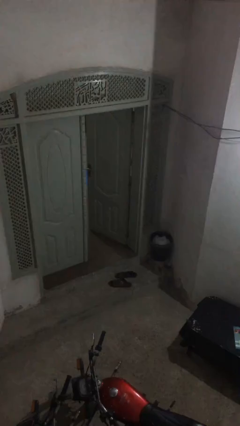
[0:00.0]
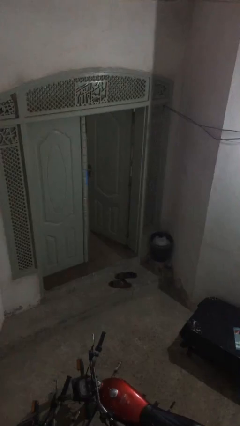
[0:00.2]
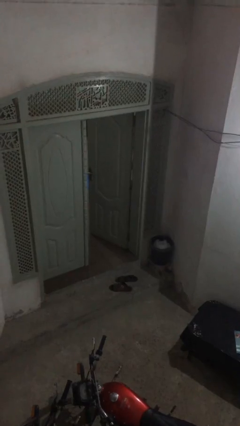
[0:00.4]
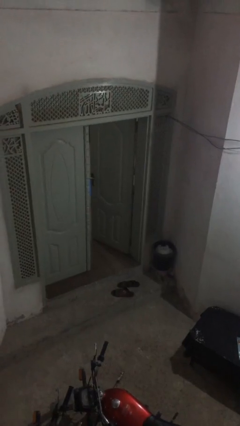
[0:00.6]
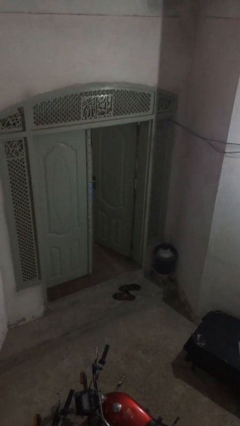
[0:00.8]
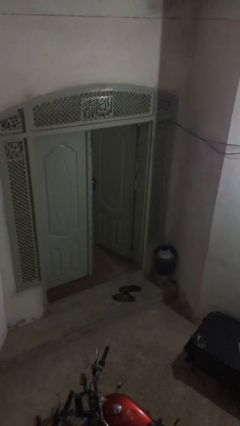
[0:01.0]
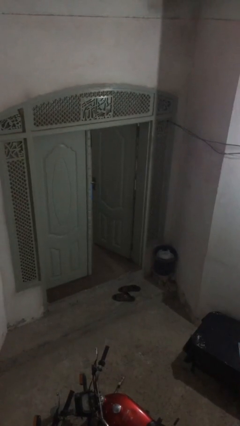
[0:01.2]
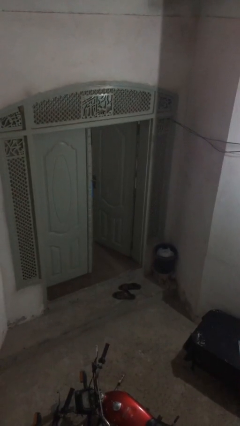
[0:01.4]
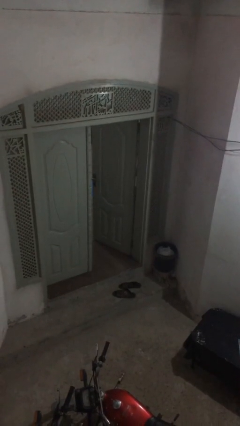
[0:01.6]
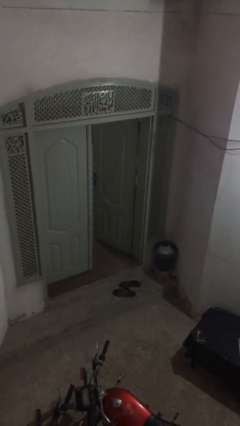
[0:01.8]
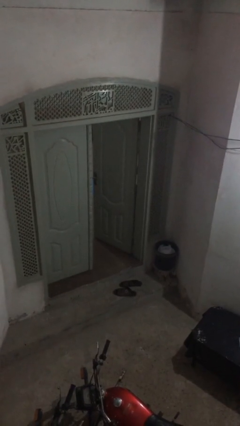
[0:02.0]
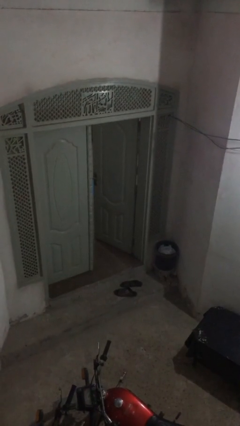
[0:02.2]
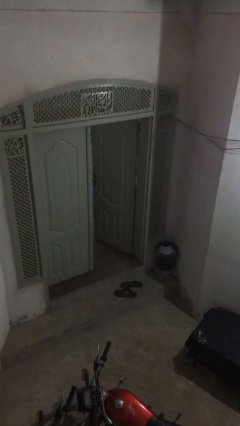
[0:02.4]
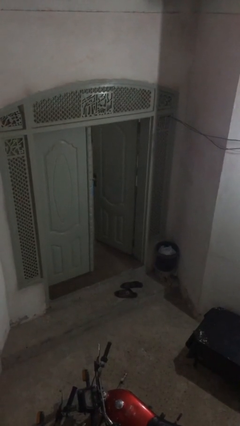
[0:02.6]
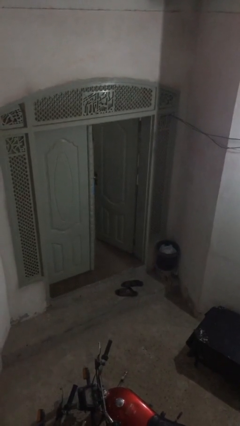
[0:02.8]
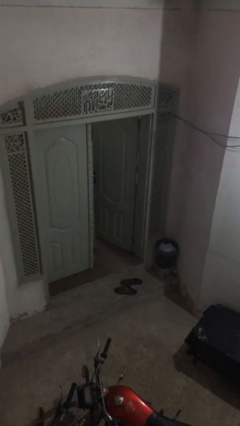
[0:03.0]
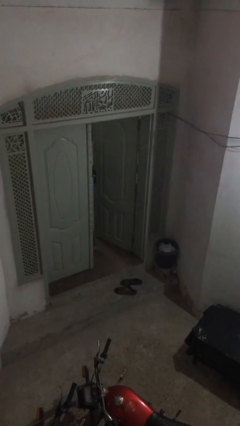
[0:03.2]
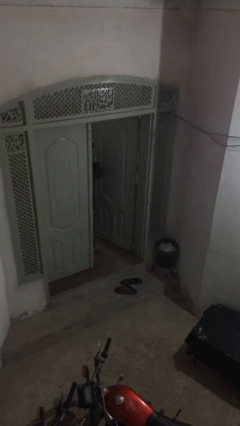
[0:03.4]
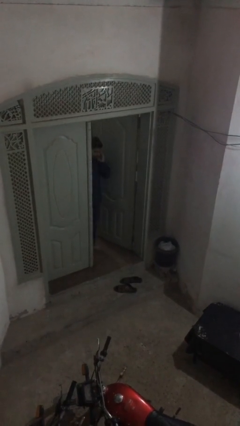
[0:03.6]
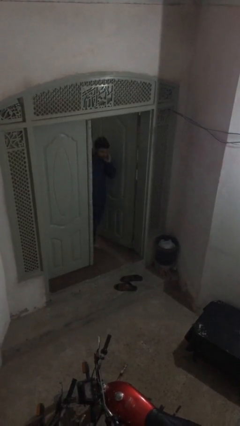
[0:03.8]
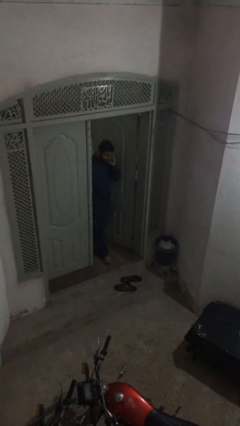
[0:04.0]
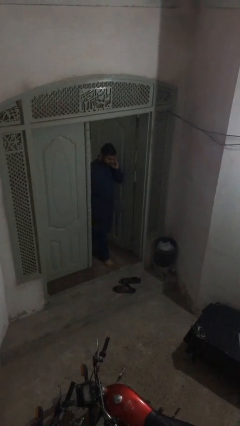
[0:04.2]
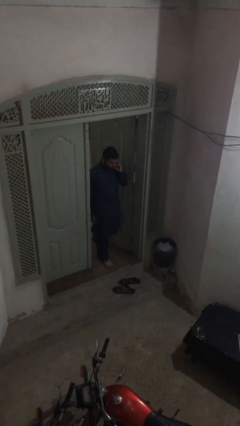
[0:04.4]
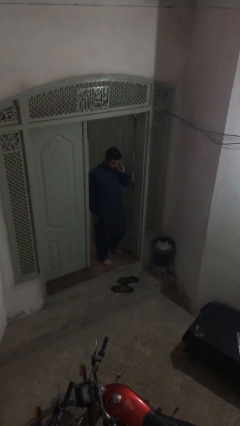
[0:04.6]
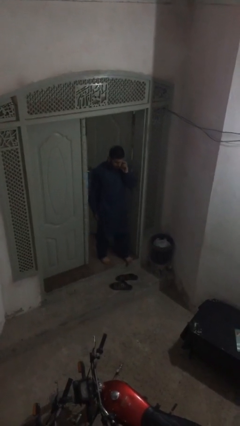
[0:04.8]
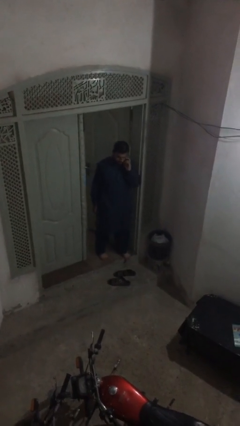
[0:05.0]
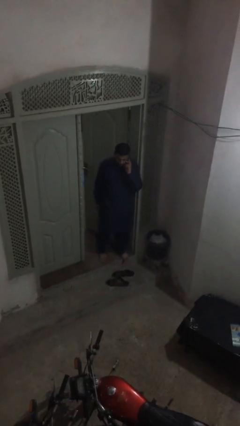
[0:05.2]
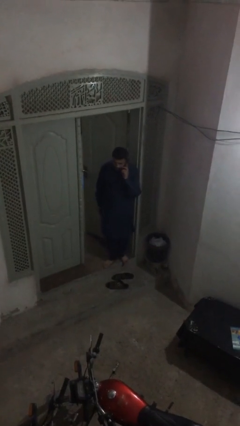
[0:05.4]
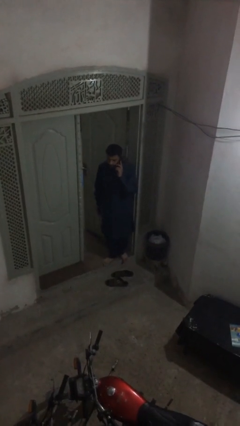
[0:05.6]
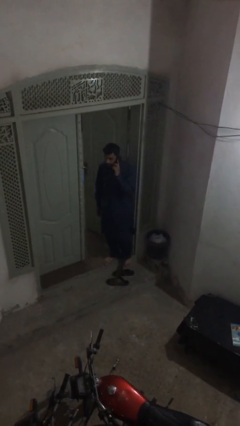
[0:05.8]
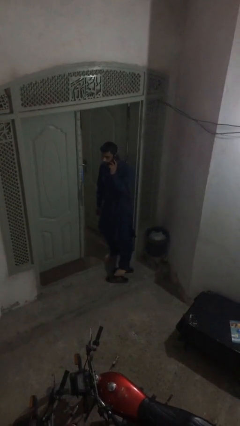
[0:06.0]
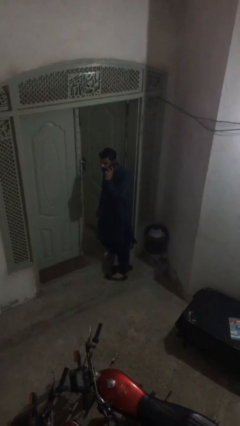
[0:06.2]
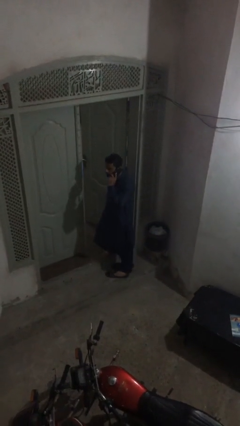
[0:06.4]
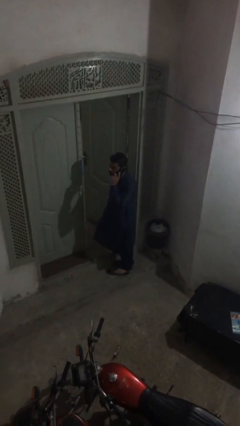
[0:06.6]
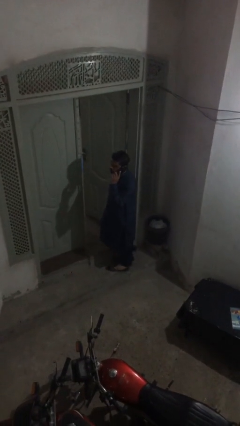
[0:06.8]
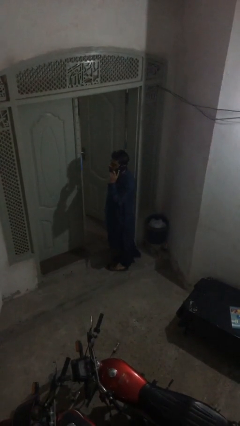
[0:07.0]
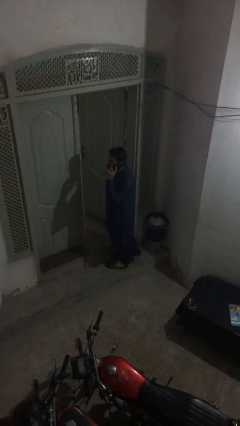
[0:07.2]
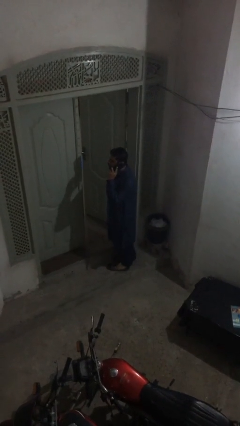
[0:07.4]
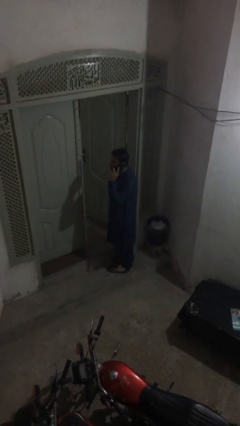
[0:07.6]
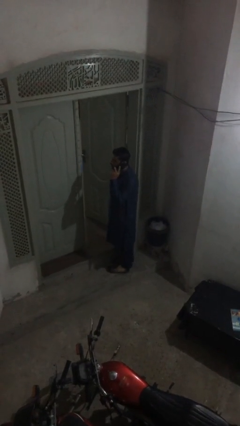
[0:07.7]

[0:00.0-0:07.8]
person enters scene through structure

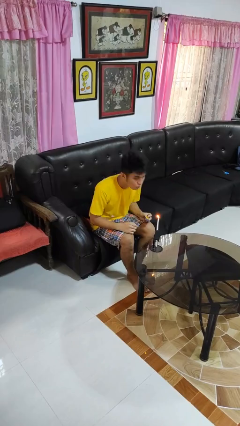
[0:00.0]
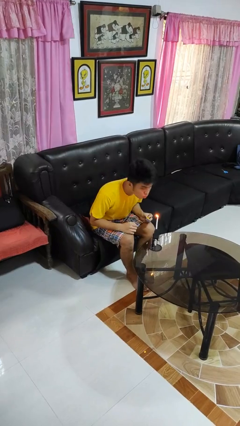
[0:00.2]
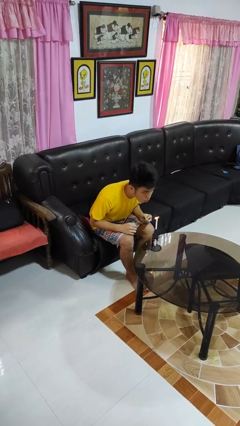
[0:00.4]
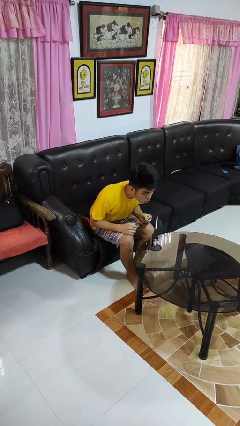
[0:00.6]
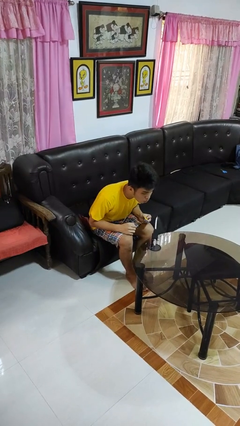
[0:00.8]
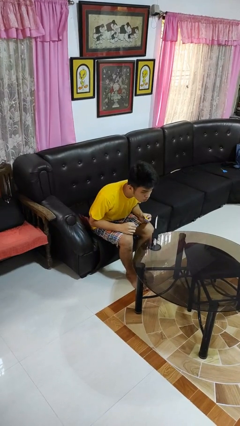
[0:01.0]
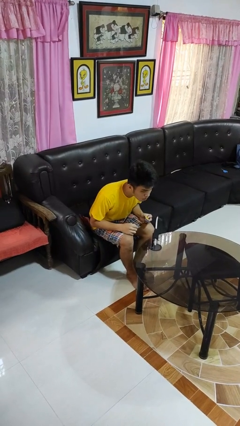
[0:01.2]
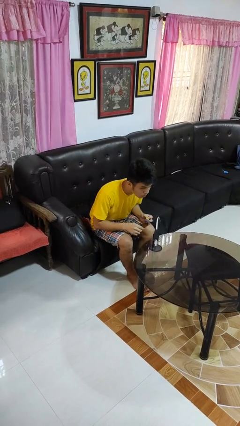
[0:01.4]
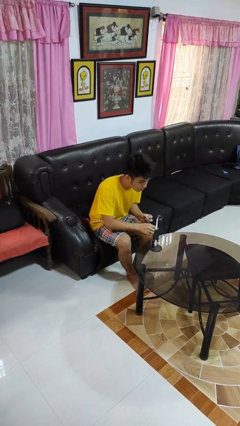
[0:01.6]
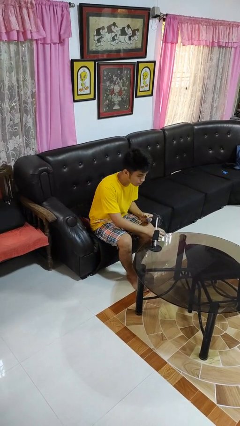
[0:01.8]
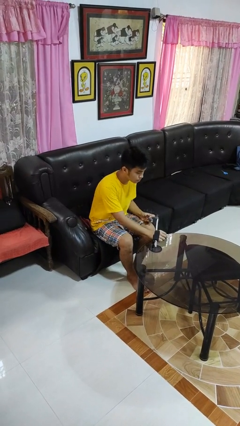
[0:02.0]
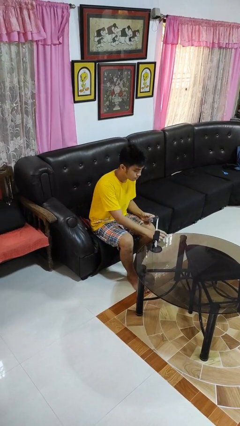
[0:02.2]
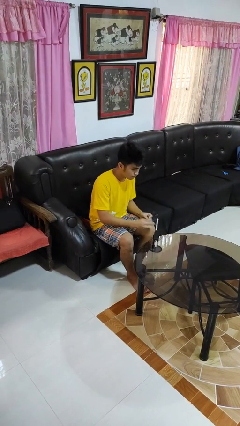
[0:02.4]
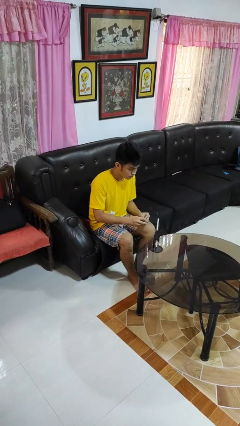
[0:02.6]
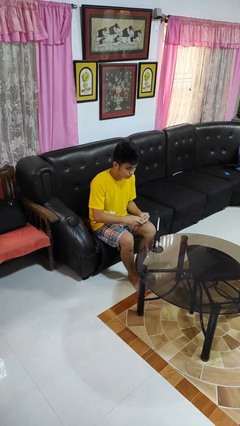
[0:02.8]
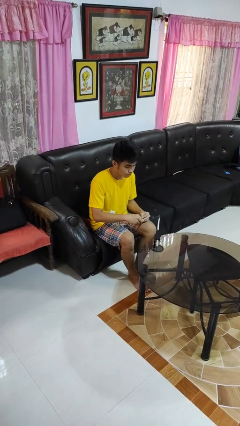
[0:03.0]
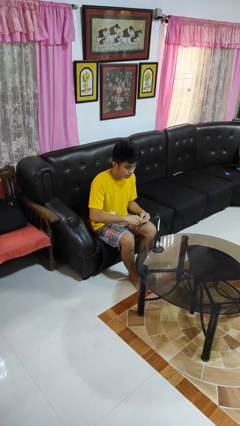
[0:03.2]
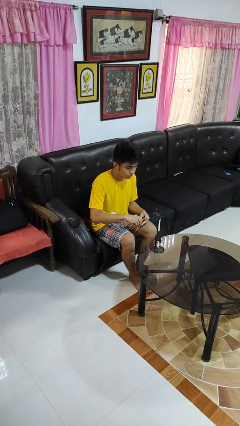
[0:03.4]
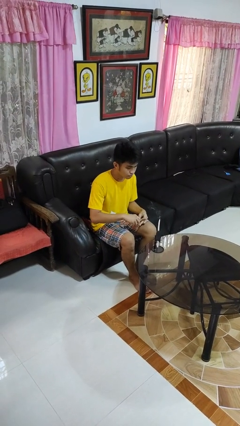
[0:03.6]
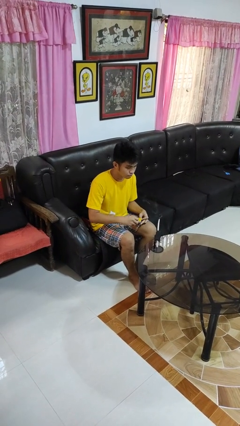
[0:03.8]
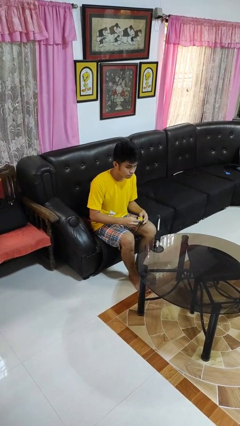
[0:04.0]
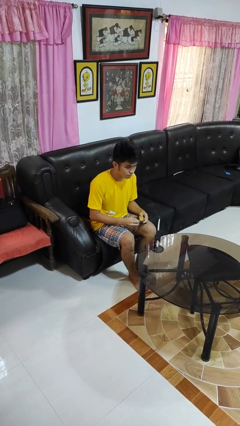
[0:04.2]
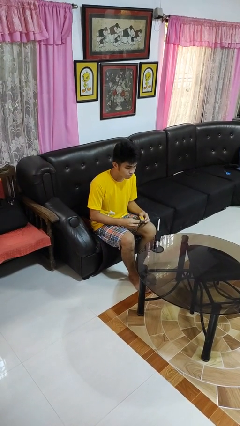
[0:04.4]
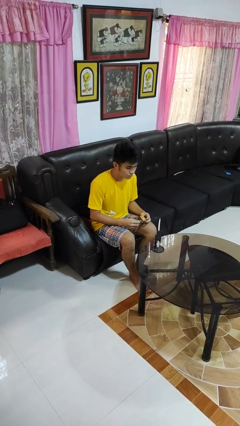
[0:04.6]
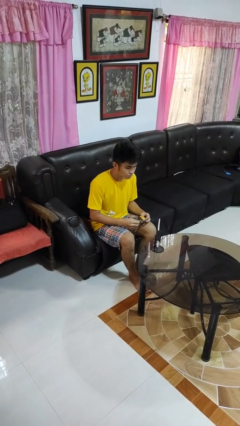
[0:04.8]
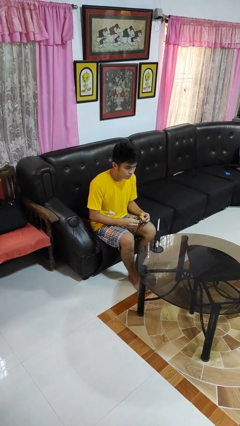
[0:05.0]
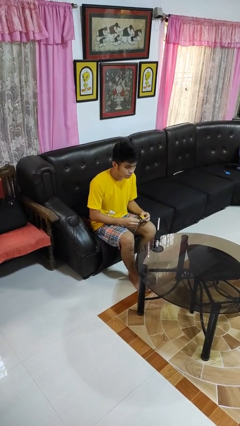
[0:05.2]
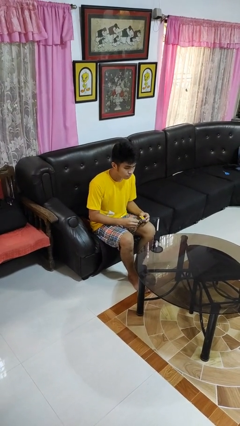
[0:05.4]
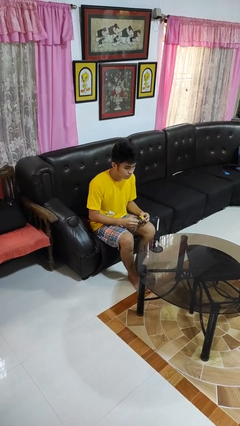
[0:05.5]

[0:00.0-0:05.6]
person extinguishes candle

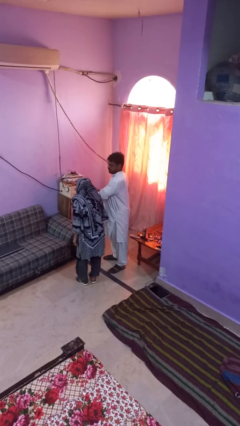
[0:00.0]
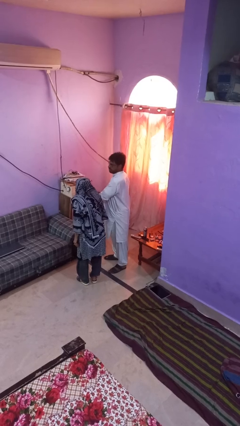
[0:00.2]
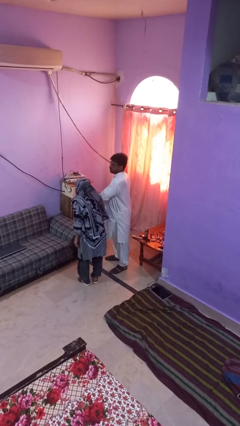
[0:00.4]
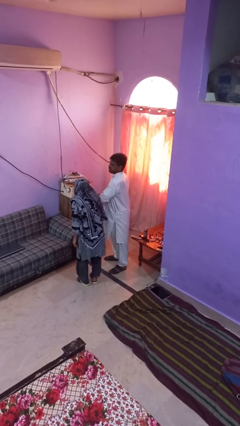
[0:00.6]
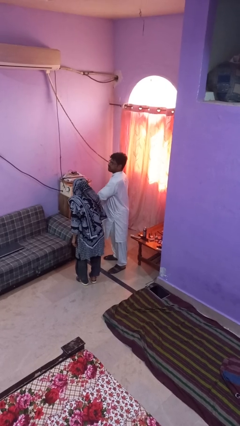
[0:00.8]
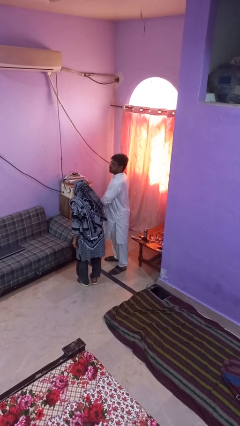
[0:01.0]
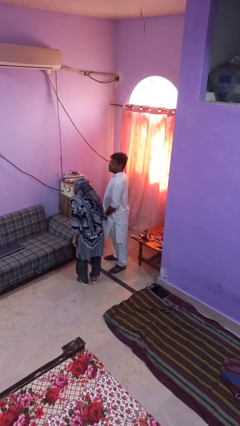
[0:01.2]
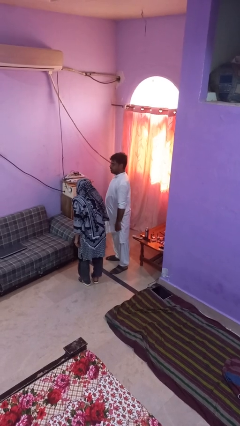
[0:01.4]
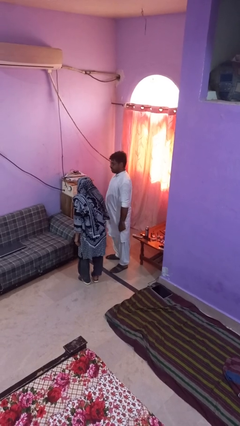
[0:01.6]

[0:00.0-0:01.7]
person nudges person with elbow

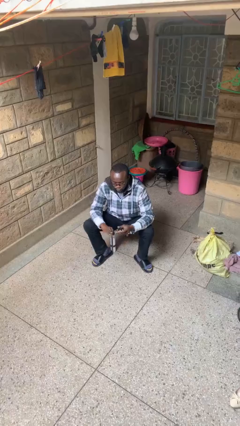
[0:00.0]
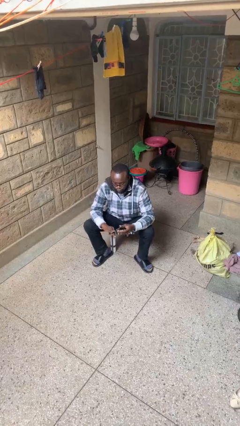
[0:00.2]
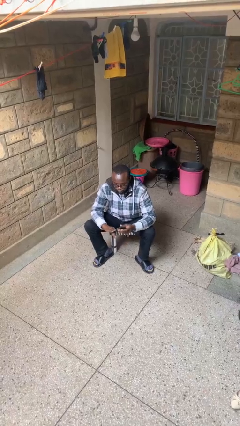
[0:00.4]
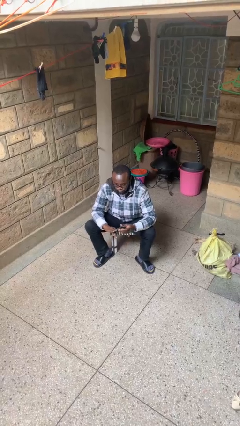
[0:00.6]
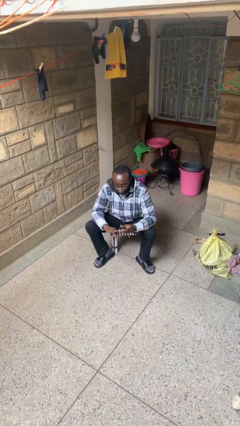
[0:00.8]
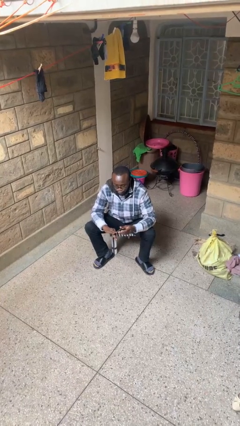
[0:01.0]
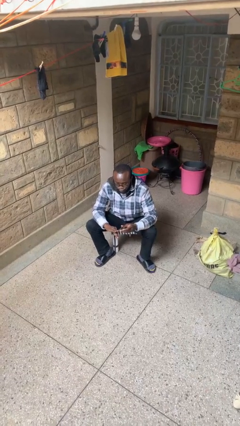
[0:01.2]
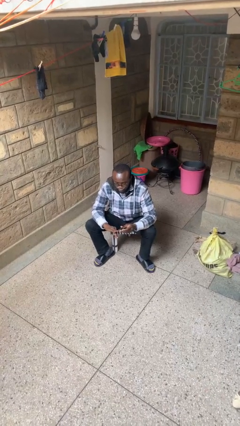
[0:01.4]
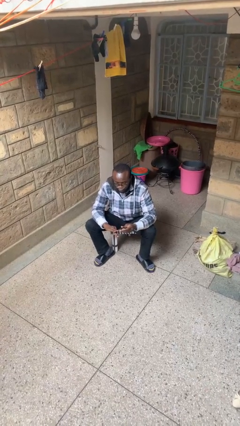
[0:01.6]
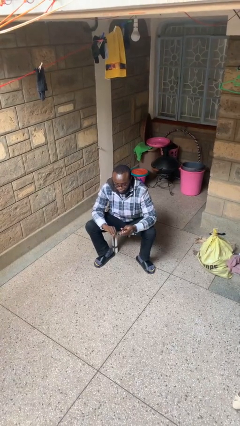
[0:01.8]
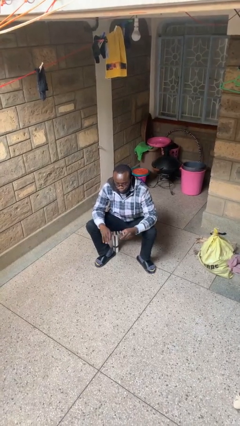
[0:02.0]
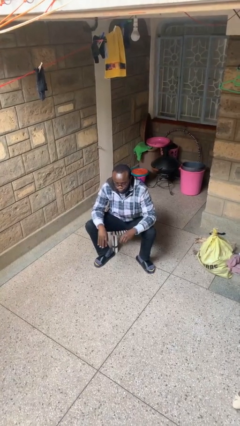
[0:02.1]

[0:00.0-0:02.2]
person clips fingernails

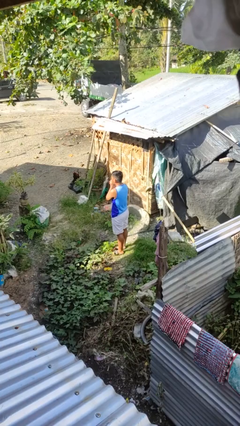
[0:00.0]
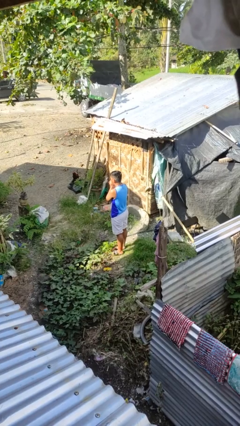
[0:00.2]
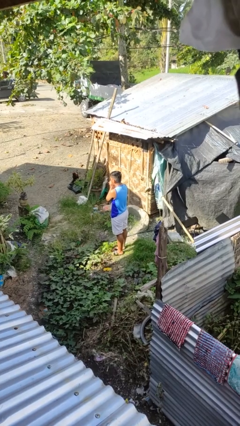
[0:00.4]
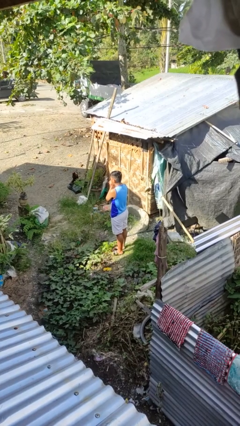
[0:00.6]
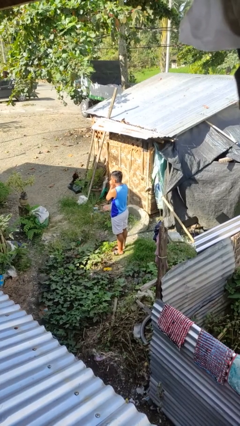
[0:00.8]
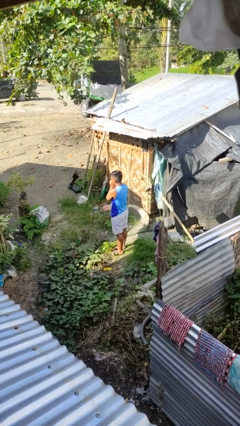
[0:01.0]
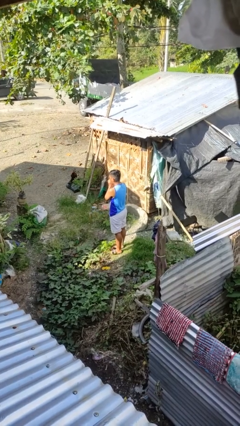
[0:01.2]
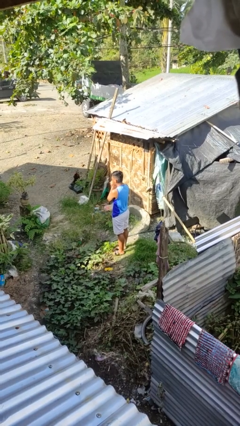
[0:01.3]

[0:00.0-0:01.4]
person blows into hands
